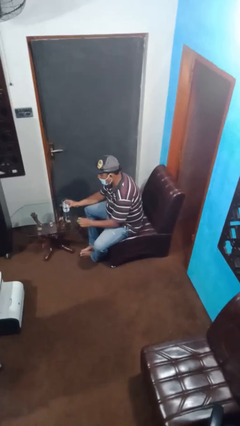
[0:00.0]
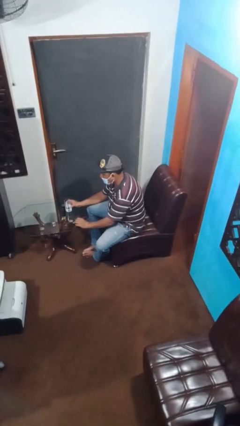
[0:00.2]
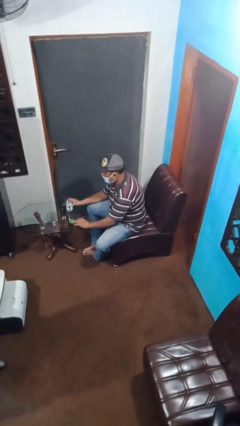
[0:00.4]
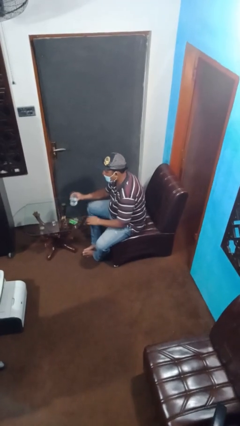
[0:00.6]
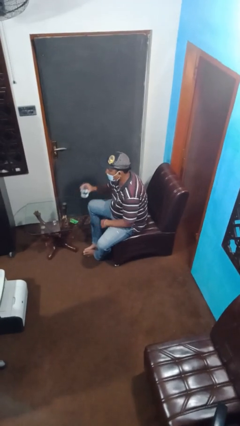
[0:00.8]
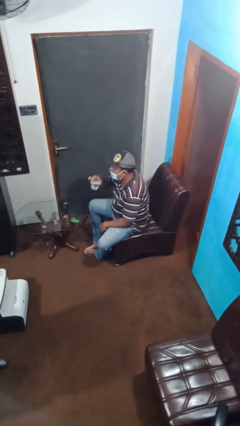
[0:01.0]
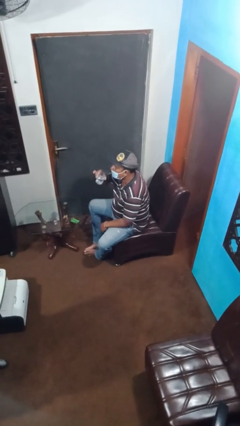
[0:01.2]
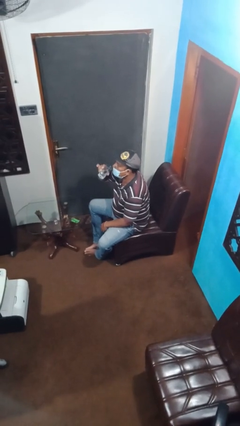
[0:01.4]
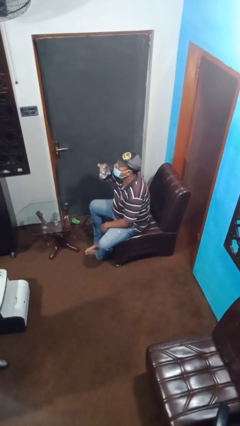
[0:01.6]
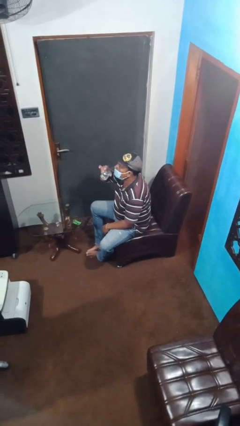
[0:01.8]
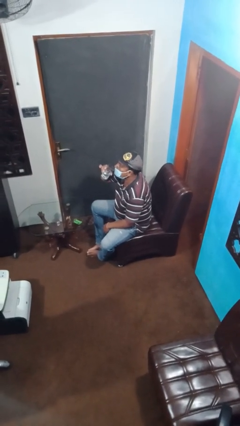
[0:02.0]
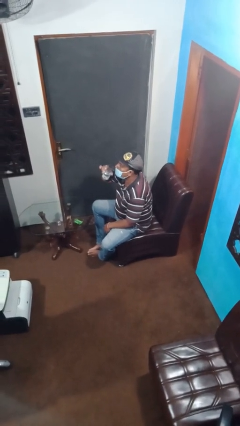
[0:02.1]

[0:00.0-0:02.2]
person drinks from cup

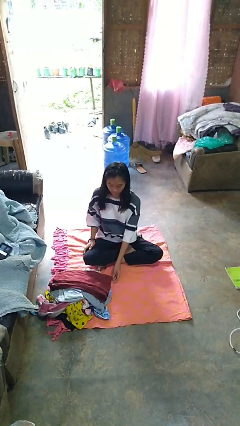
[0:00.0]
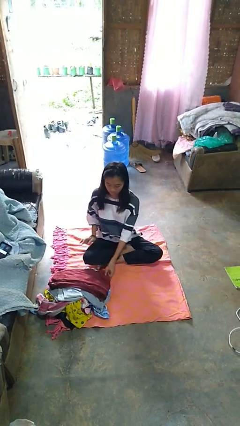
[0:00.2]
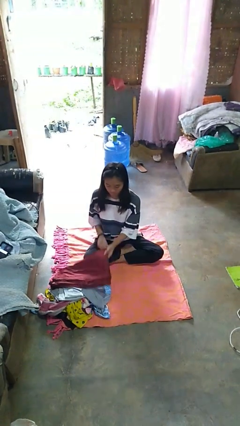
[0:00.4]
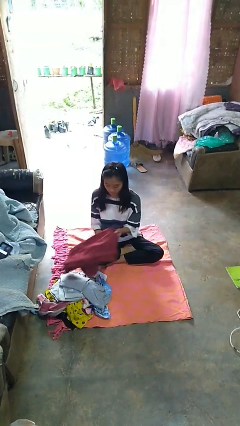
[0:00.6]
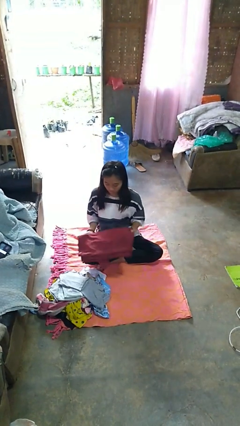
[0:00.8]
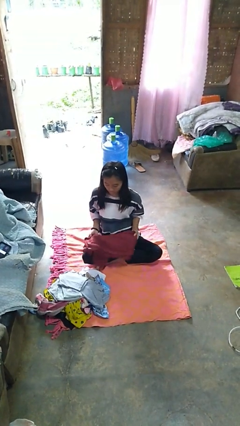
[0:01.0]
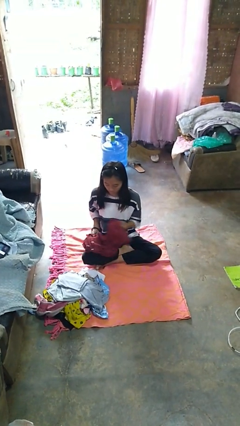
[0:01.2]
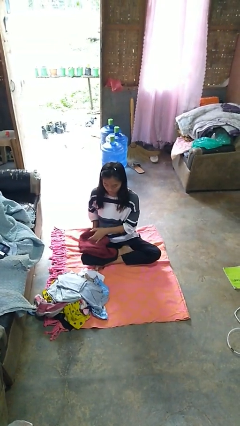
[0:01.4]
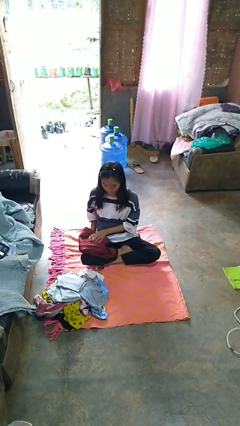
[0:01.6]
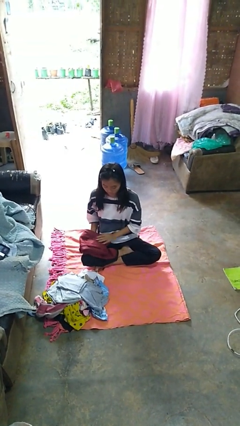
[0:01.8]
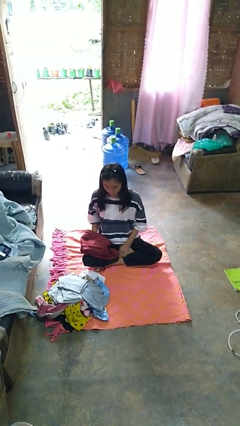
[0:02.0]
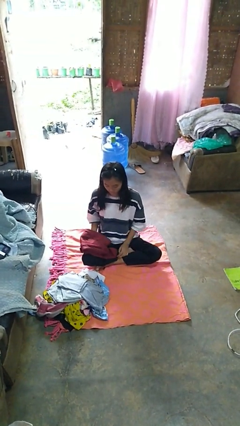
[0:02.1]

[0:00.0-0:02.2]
person folds pants

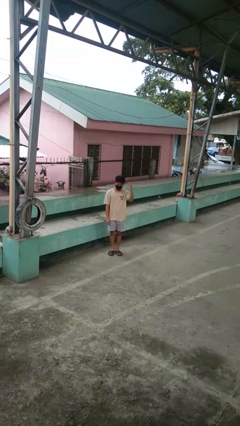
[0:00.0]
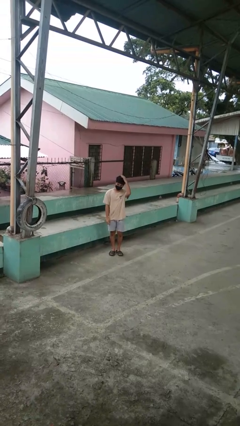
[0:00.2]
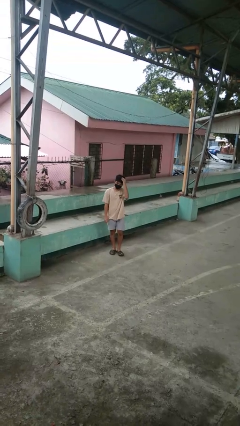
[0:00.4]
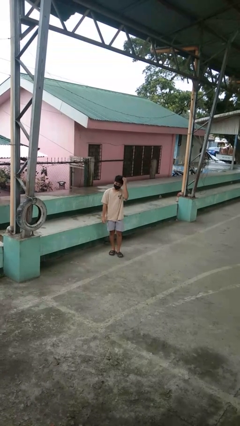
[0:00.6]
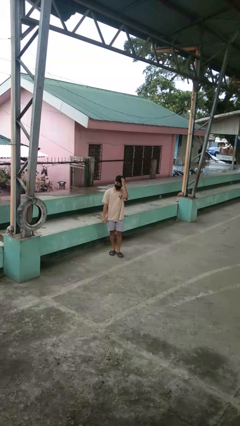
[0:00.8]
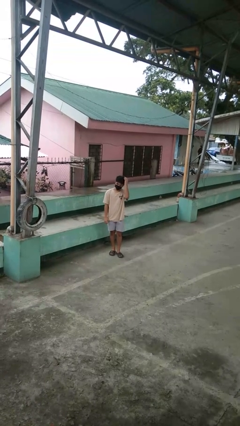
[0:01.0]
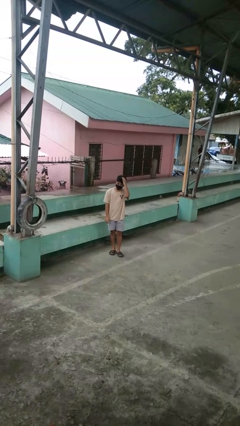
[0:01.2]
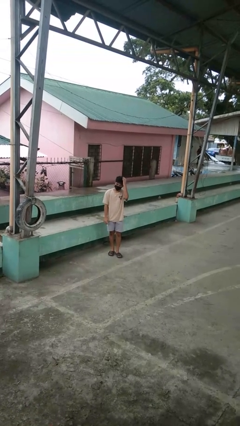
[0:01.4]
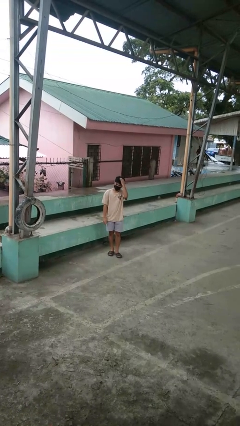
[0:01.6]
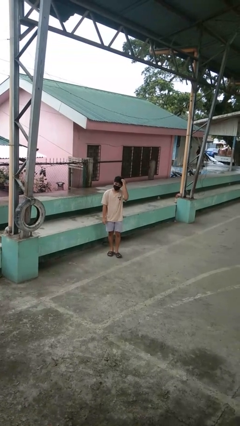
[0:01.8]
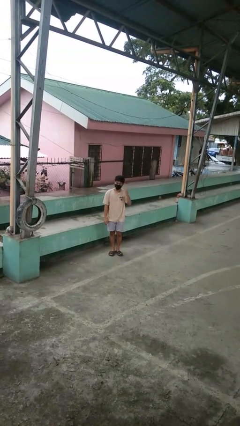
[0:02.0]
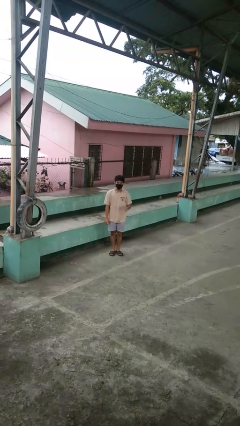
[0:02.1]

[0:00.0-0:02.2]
person pats head

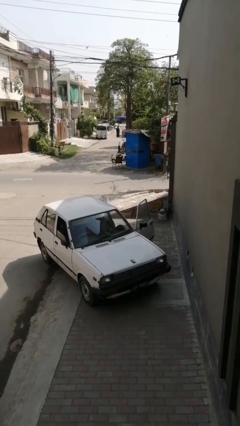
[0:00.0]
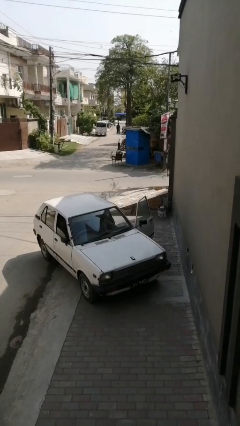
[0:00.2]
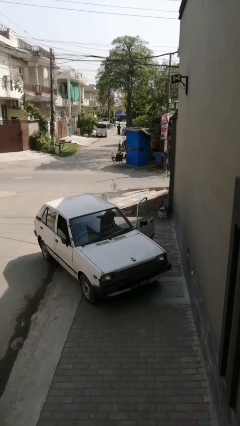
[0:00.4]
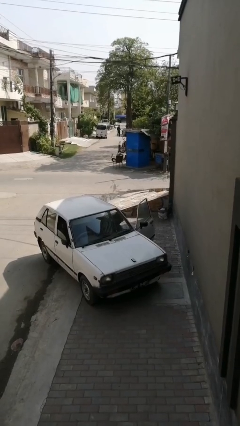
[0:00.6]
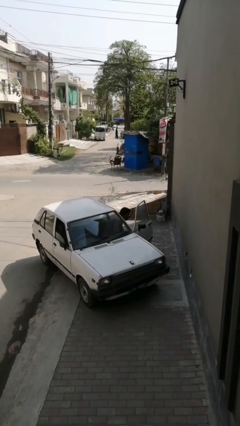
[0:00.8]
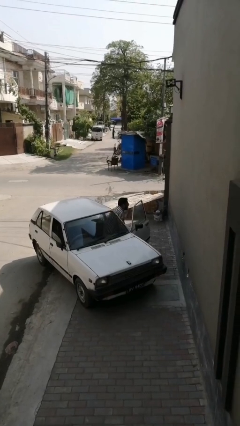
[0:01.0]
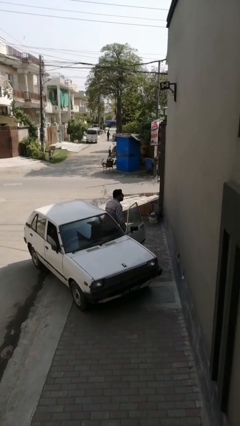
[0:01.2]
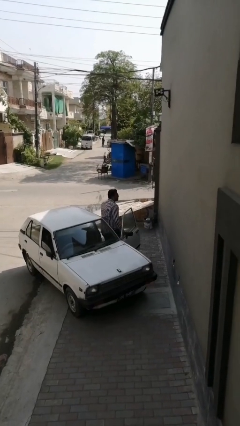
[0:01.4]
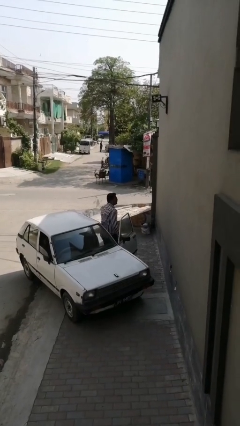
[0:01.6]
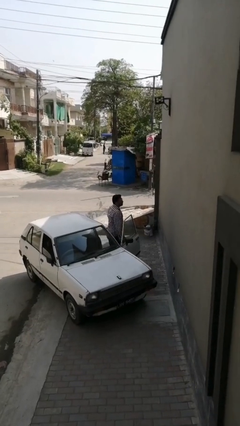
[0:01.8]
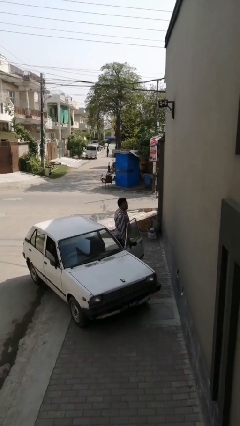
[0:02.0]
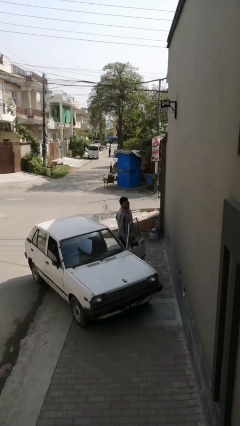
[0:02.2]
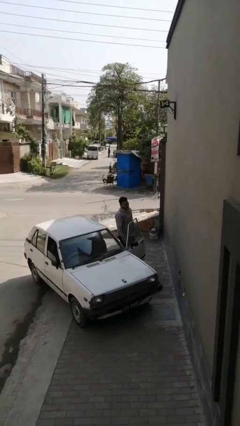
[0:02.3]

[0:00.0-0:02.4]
person exits car

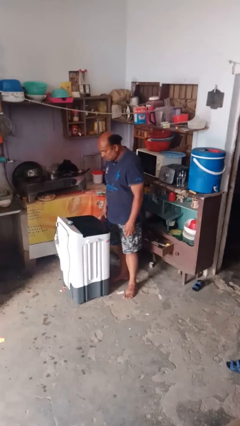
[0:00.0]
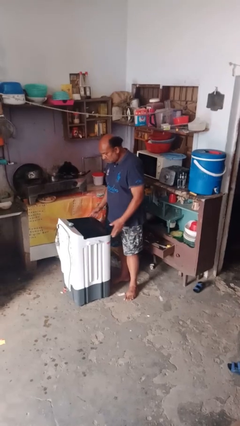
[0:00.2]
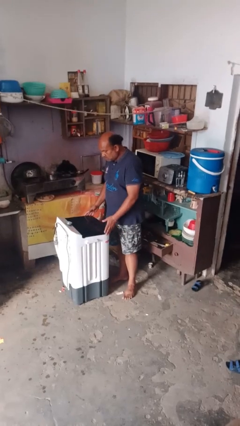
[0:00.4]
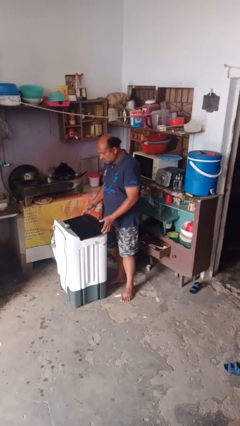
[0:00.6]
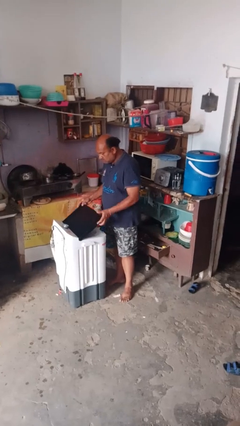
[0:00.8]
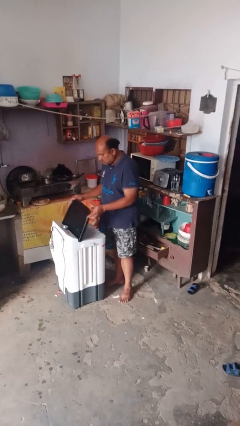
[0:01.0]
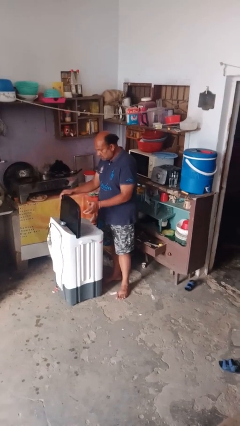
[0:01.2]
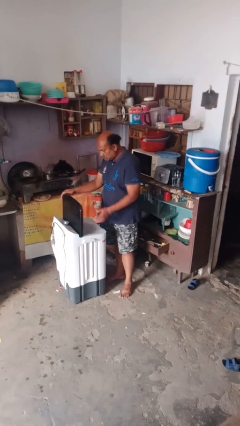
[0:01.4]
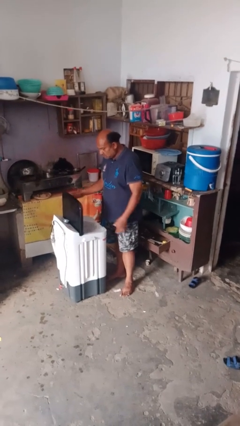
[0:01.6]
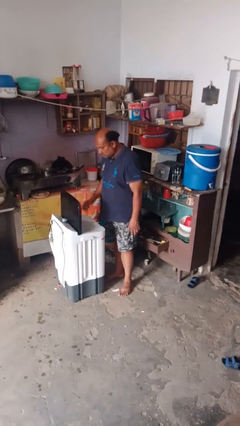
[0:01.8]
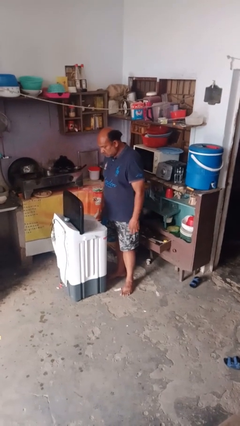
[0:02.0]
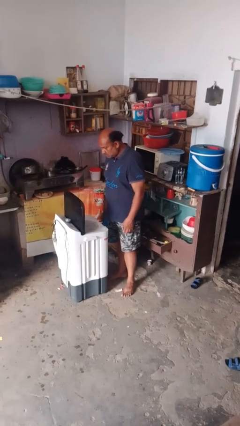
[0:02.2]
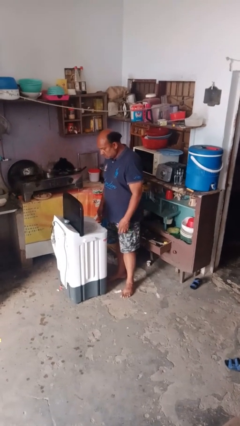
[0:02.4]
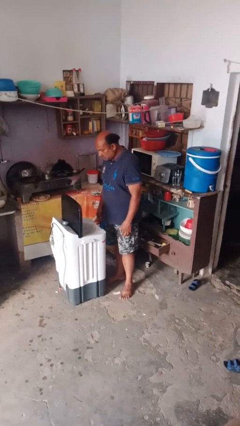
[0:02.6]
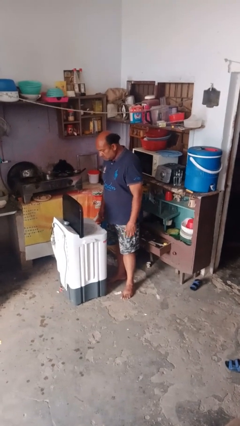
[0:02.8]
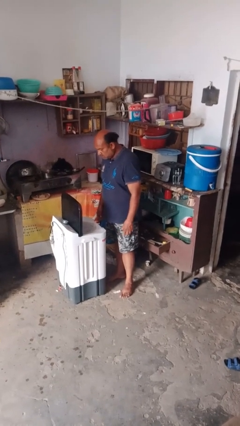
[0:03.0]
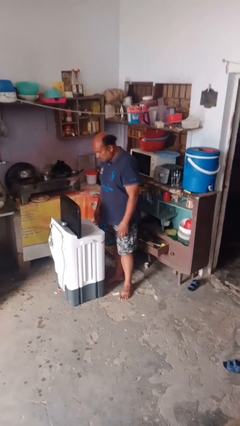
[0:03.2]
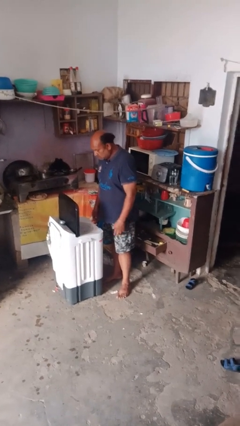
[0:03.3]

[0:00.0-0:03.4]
person opens clothes washer

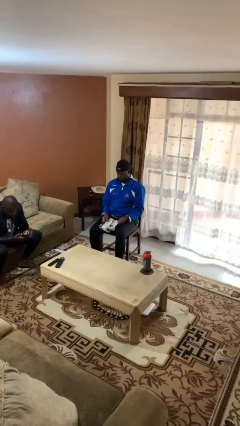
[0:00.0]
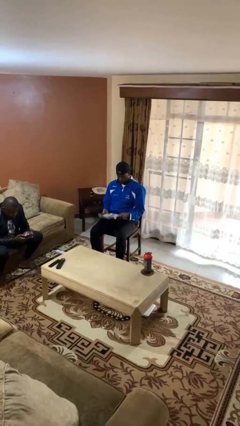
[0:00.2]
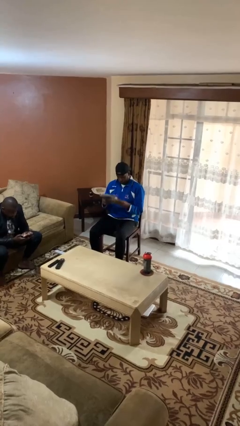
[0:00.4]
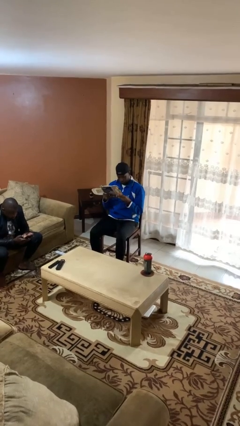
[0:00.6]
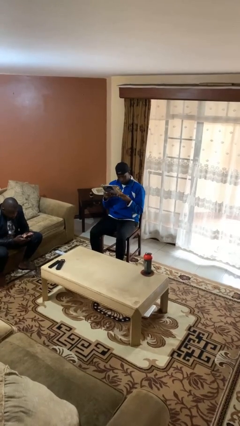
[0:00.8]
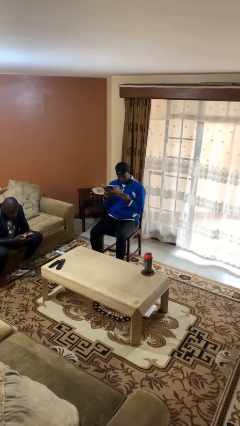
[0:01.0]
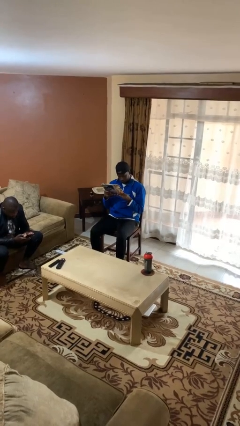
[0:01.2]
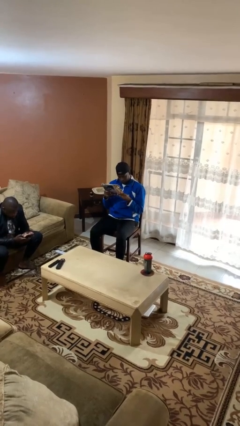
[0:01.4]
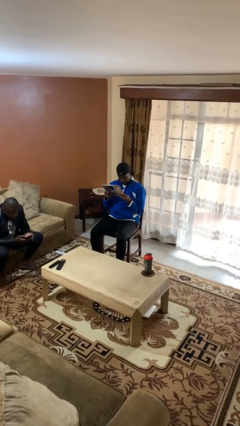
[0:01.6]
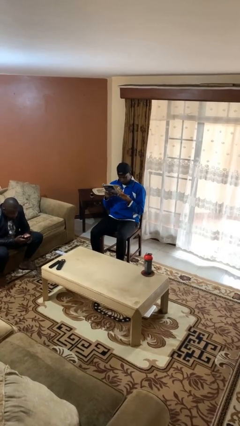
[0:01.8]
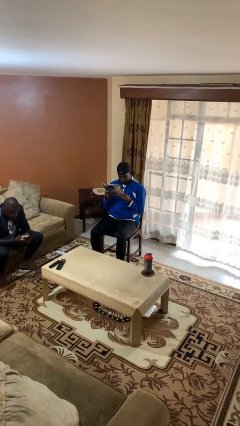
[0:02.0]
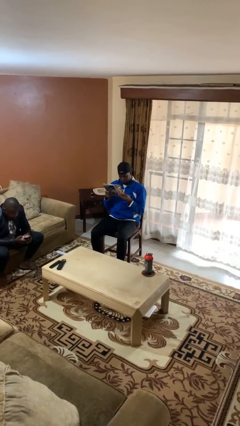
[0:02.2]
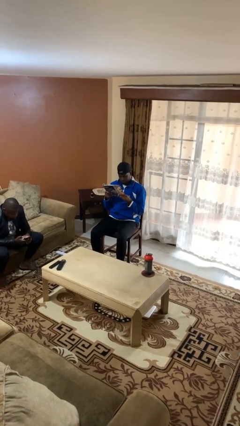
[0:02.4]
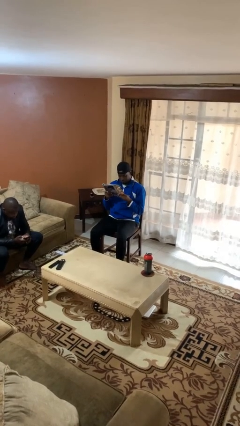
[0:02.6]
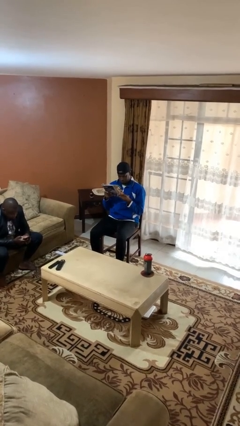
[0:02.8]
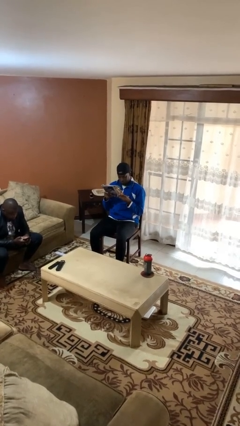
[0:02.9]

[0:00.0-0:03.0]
person reads document

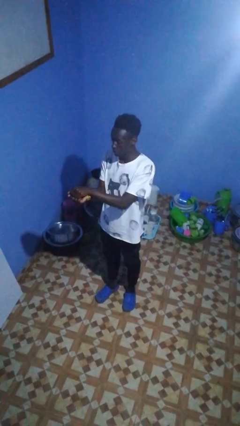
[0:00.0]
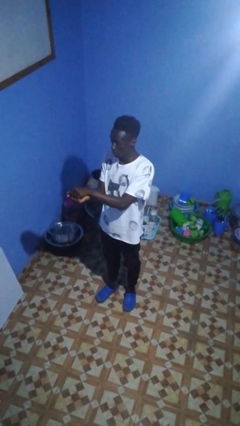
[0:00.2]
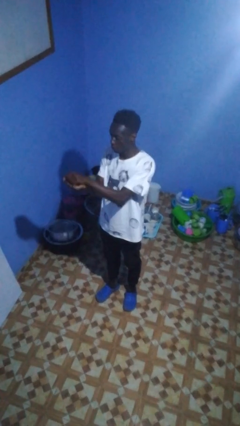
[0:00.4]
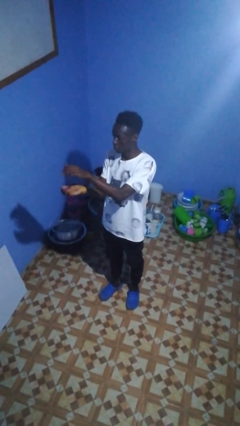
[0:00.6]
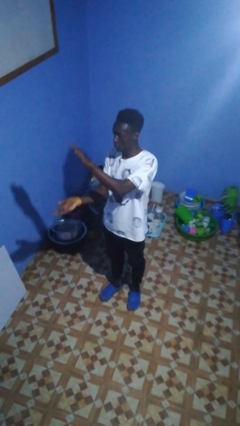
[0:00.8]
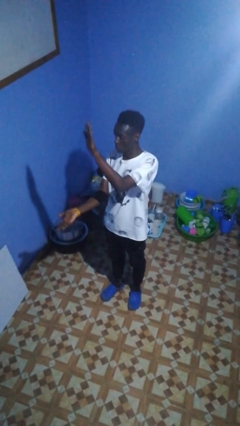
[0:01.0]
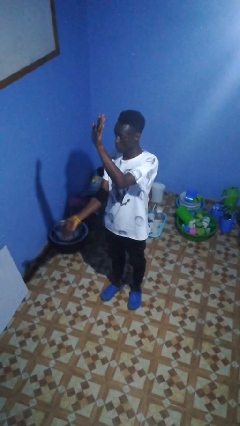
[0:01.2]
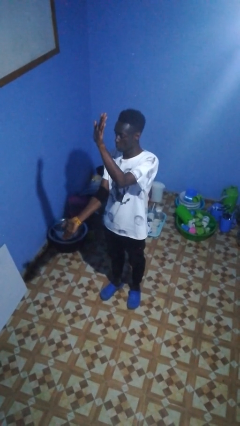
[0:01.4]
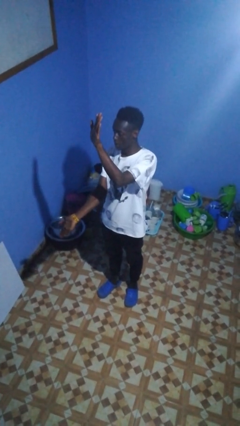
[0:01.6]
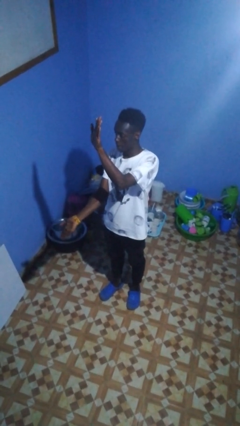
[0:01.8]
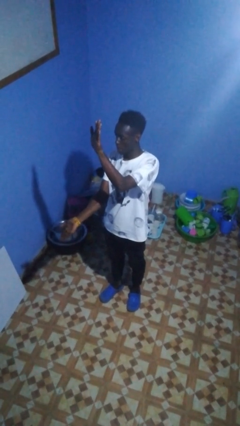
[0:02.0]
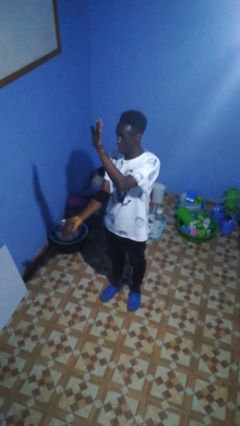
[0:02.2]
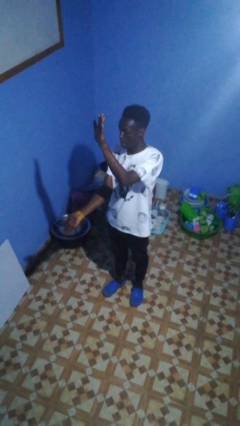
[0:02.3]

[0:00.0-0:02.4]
person gestures zoom in
